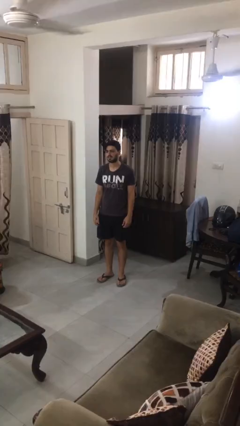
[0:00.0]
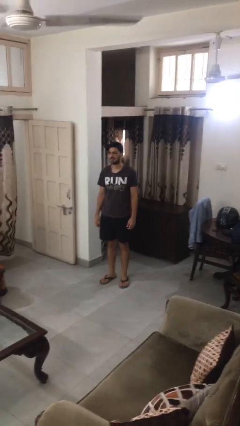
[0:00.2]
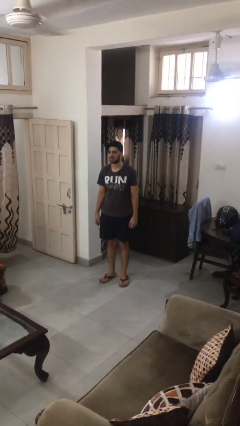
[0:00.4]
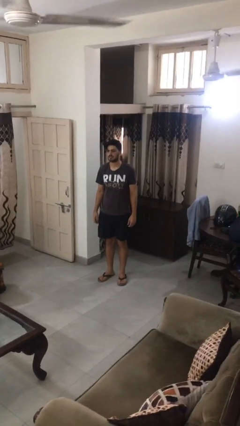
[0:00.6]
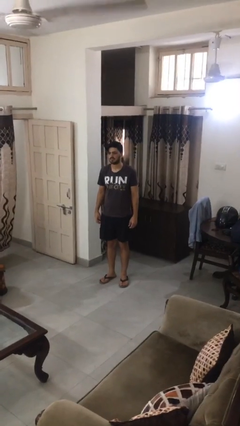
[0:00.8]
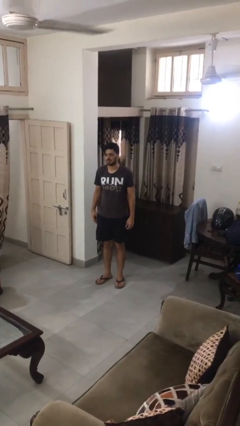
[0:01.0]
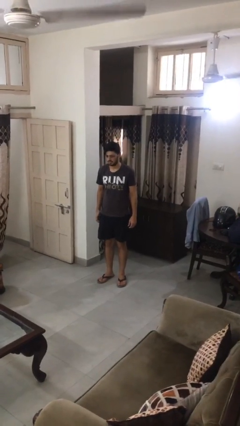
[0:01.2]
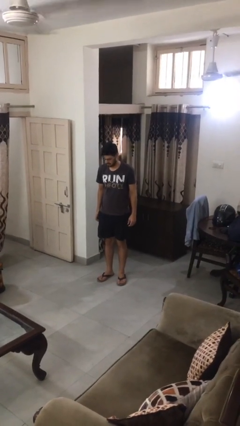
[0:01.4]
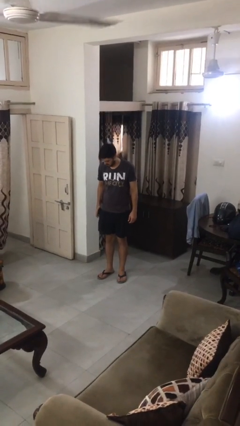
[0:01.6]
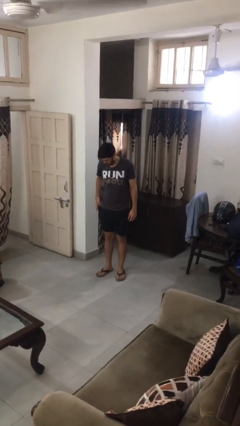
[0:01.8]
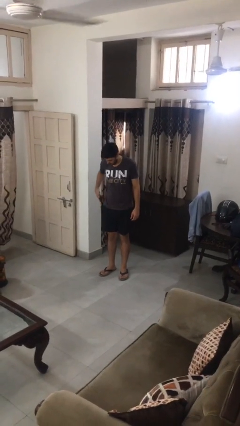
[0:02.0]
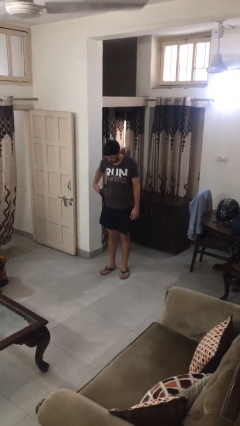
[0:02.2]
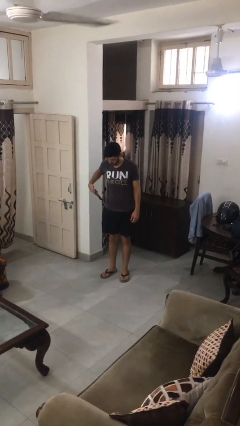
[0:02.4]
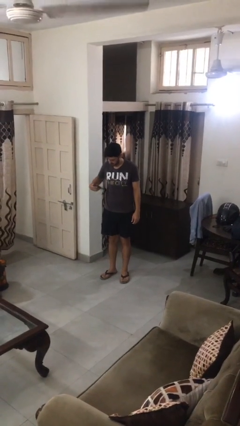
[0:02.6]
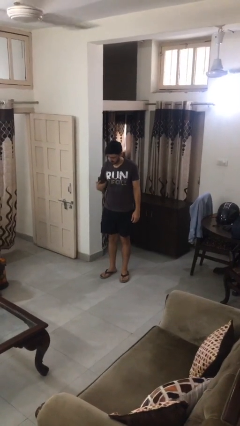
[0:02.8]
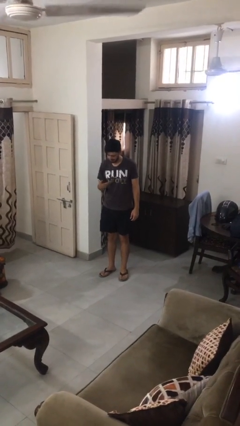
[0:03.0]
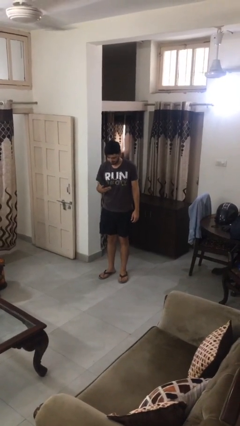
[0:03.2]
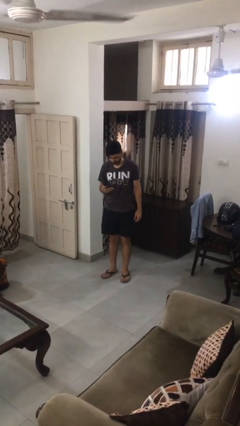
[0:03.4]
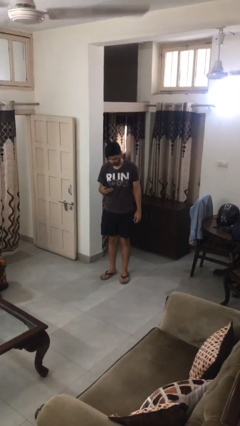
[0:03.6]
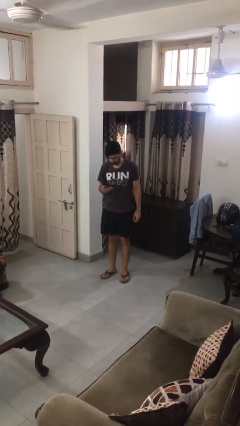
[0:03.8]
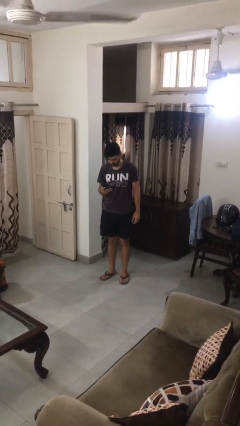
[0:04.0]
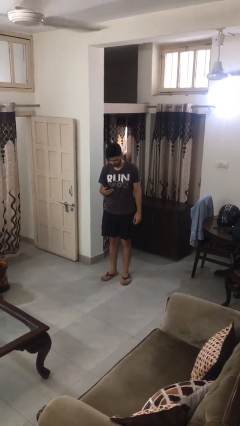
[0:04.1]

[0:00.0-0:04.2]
person takes phone from pocket

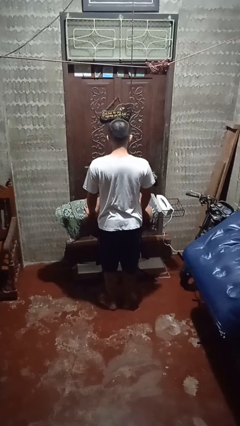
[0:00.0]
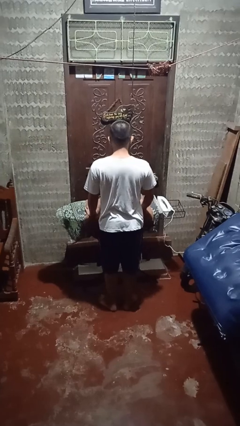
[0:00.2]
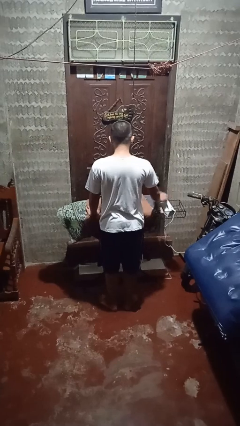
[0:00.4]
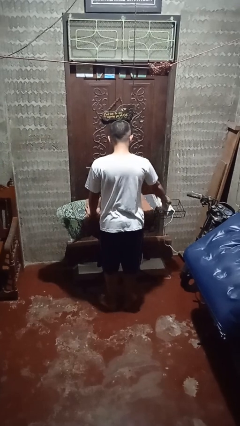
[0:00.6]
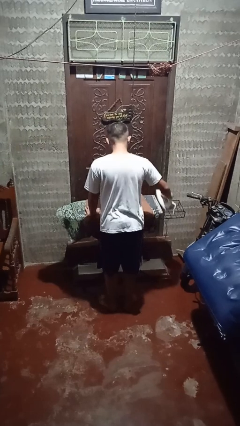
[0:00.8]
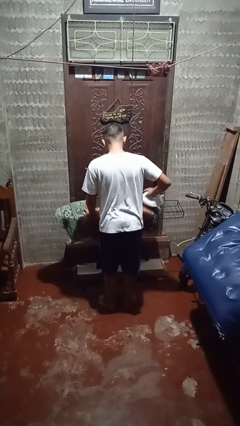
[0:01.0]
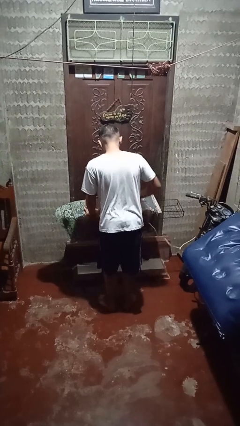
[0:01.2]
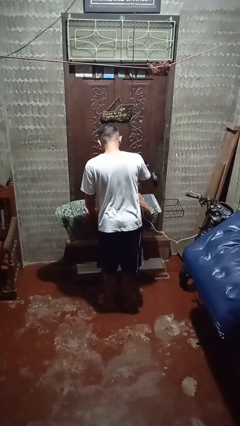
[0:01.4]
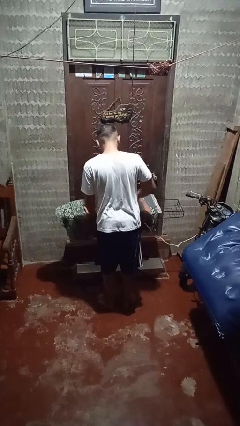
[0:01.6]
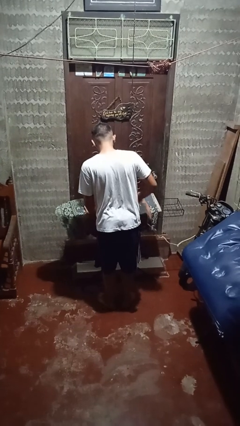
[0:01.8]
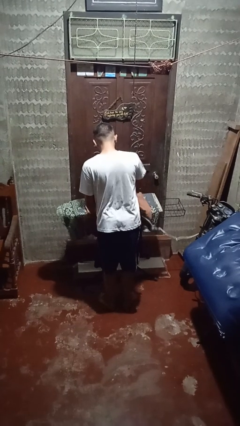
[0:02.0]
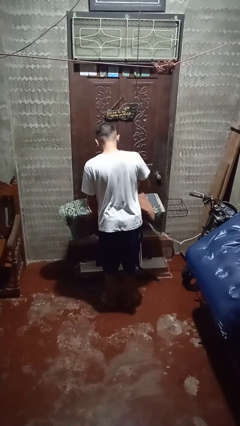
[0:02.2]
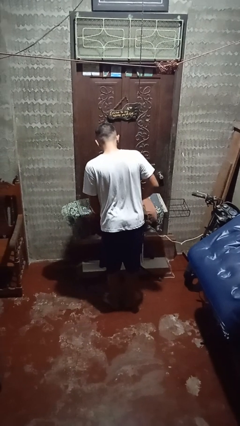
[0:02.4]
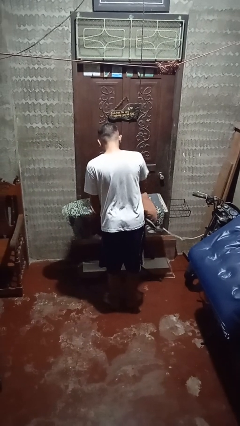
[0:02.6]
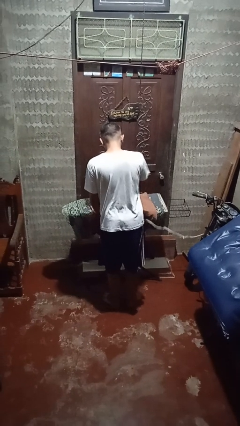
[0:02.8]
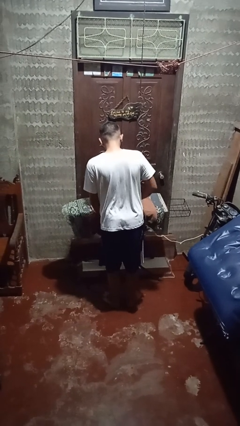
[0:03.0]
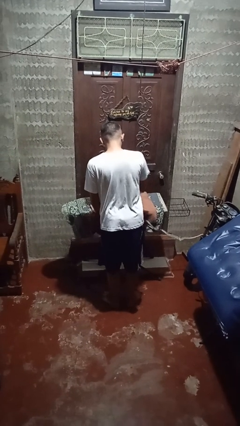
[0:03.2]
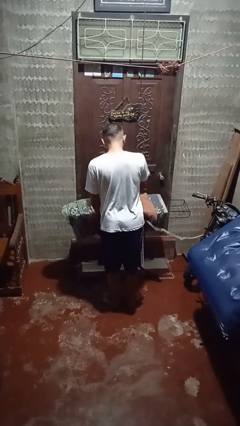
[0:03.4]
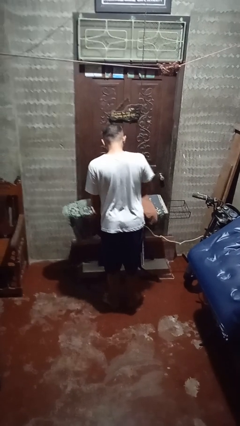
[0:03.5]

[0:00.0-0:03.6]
person irons clothes

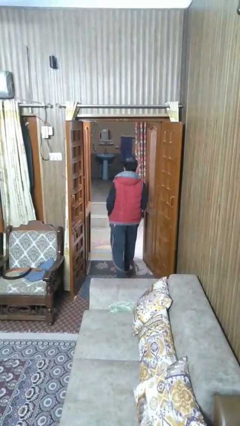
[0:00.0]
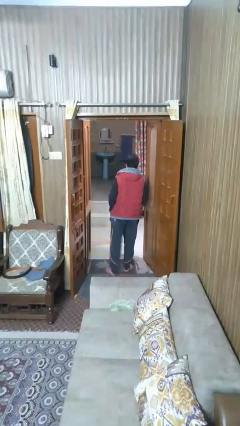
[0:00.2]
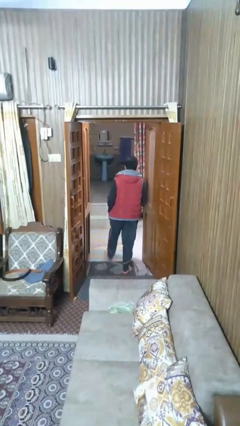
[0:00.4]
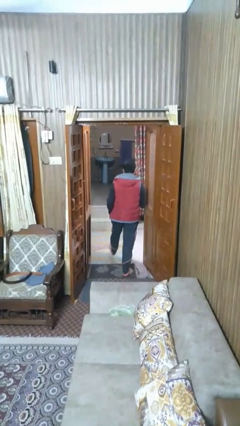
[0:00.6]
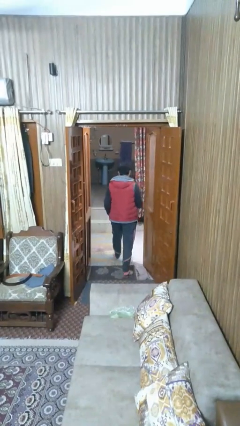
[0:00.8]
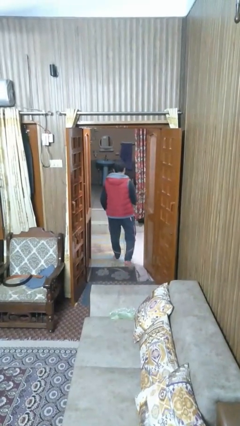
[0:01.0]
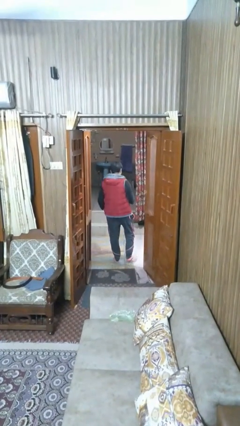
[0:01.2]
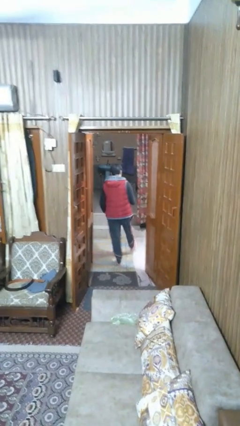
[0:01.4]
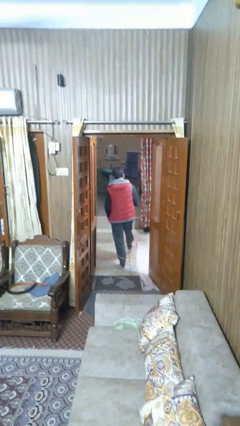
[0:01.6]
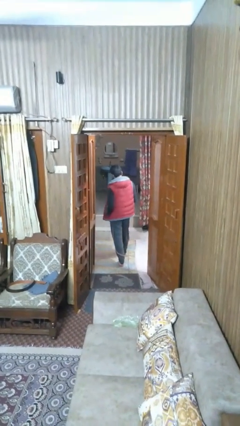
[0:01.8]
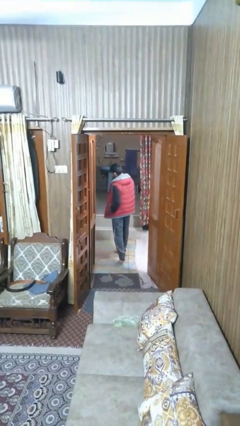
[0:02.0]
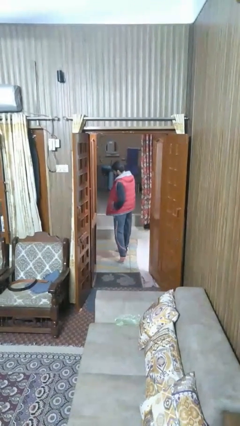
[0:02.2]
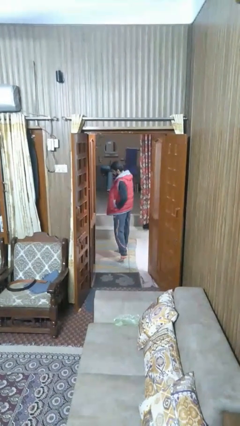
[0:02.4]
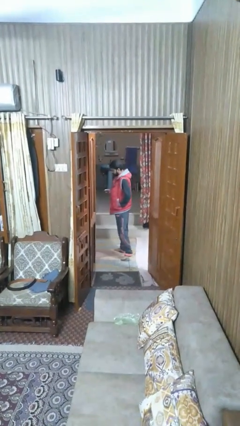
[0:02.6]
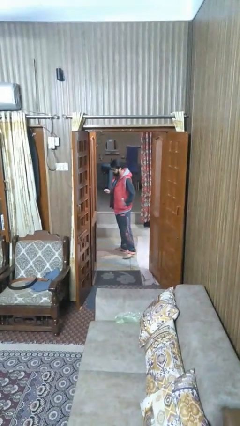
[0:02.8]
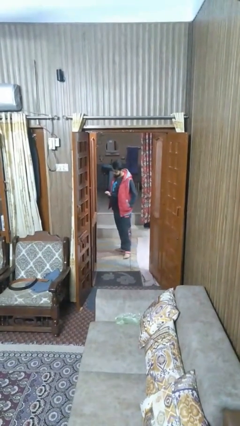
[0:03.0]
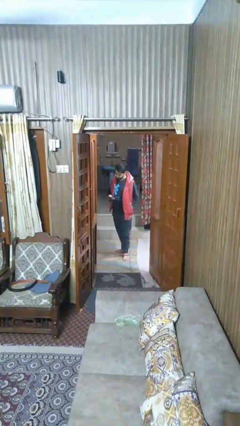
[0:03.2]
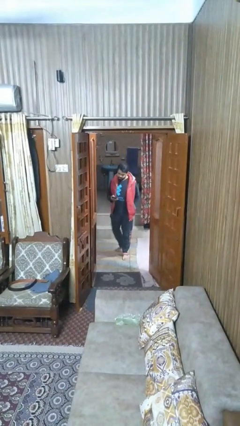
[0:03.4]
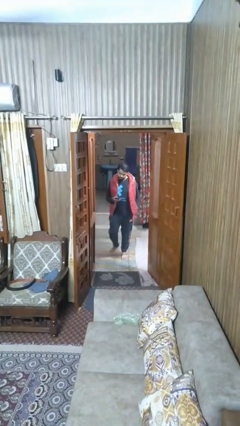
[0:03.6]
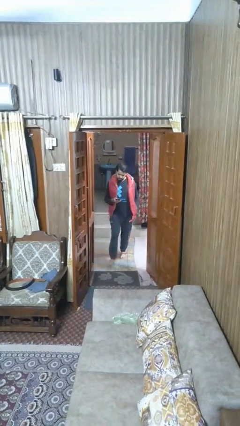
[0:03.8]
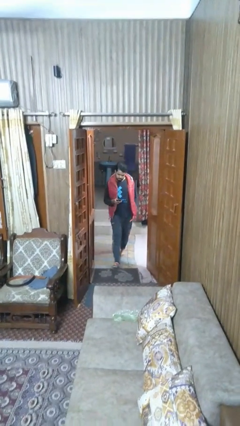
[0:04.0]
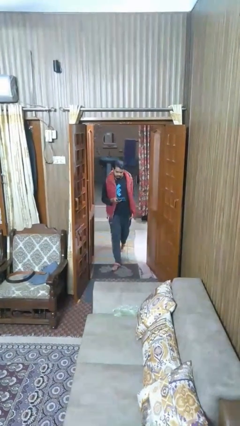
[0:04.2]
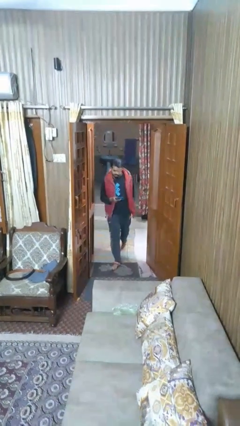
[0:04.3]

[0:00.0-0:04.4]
person exits scene through structure

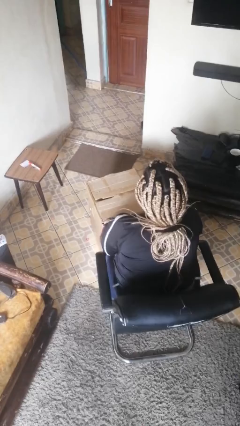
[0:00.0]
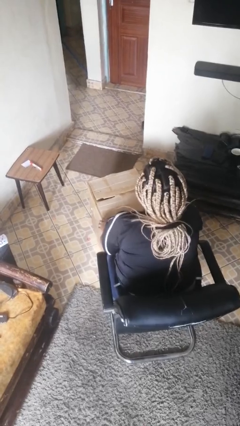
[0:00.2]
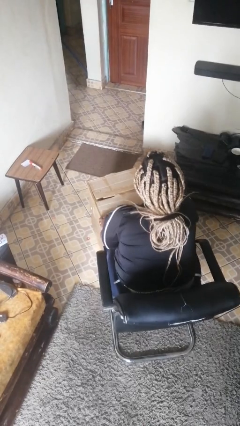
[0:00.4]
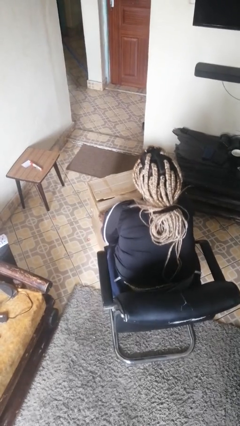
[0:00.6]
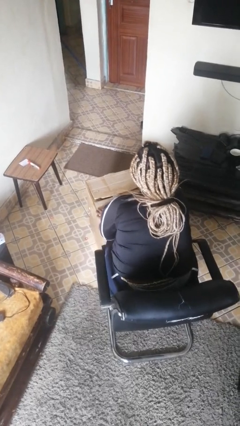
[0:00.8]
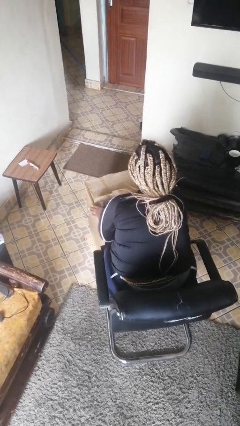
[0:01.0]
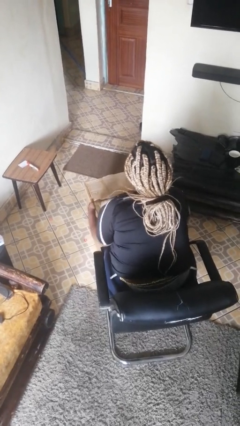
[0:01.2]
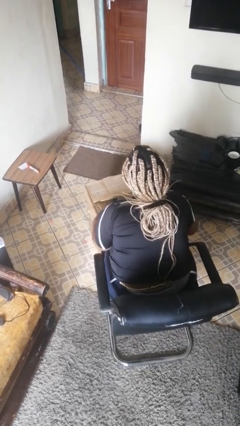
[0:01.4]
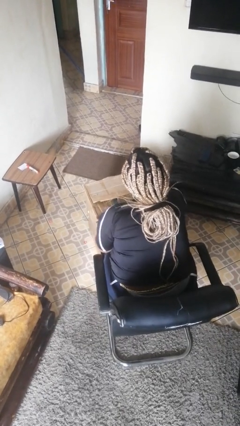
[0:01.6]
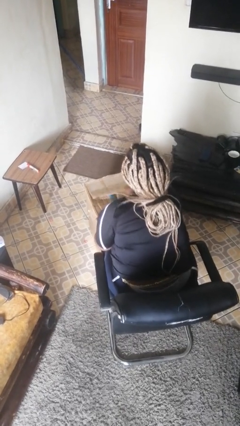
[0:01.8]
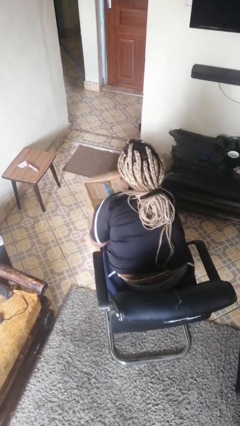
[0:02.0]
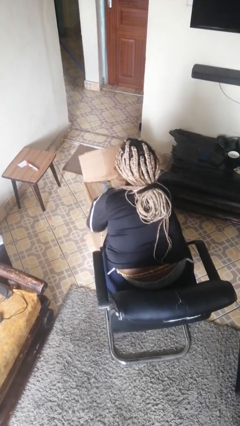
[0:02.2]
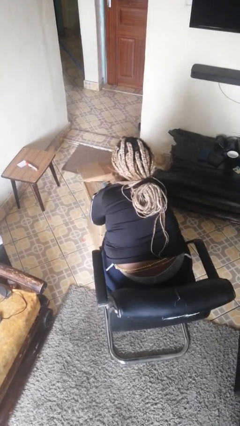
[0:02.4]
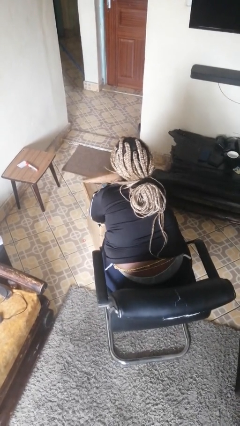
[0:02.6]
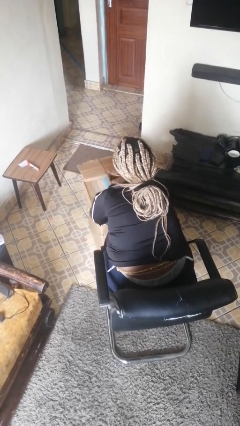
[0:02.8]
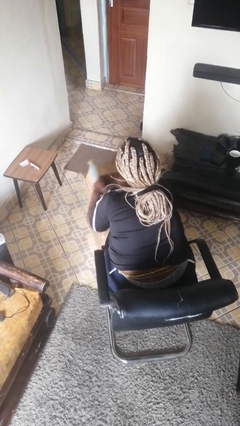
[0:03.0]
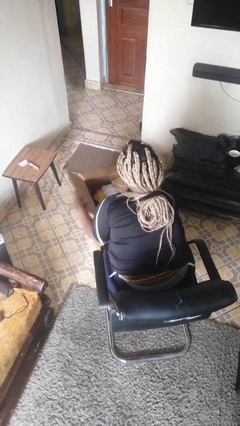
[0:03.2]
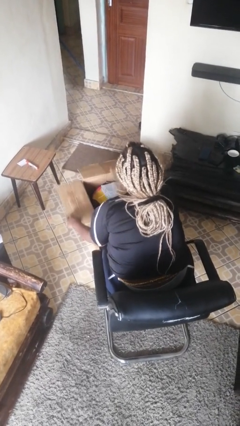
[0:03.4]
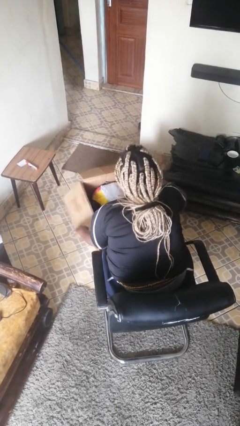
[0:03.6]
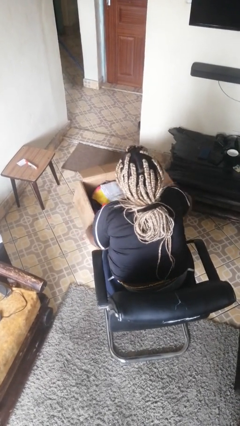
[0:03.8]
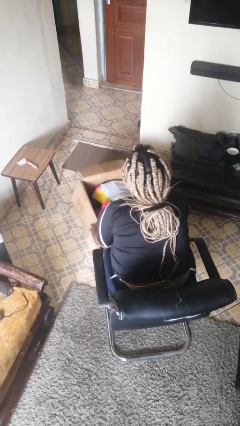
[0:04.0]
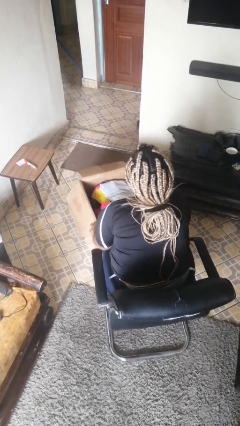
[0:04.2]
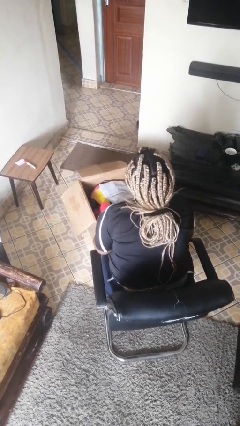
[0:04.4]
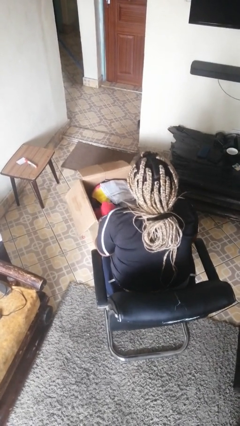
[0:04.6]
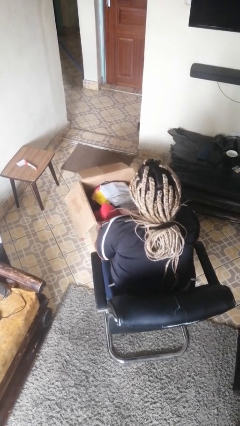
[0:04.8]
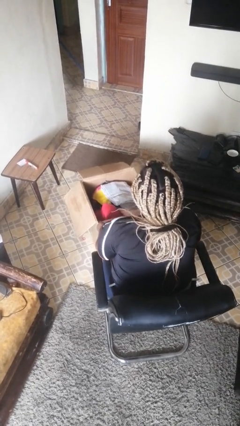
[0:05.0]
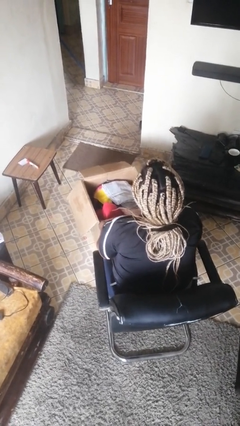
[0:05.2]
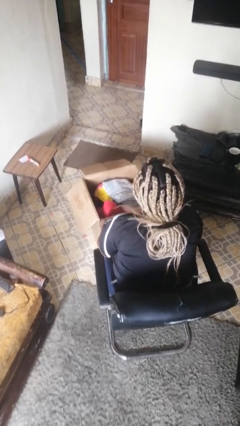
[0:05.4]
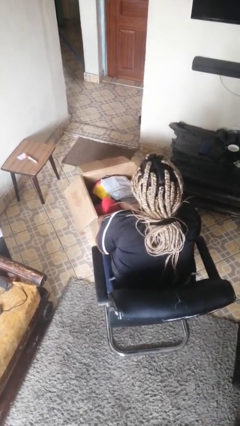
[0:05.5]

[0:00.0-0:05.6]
person opens box
